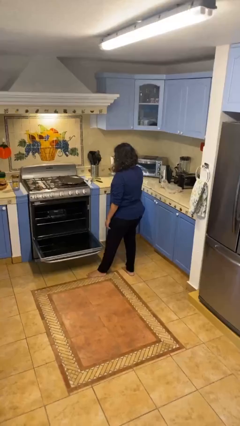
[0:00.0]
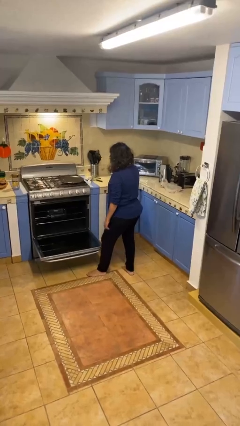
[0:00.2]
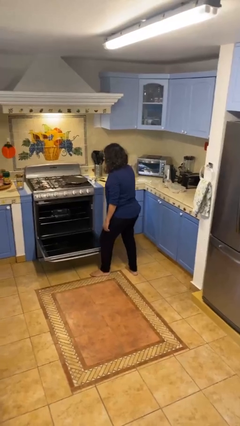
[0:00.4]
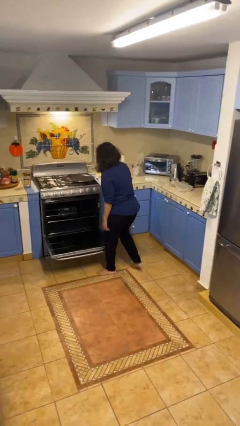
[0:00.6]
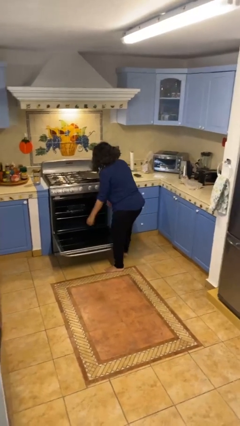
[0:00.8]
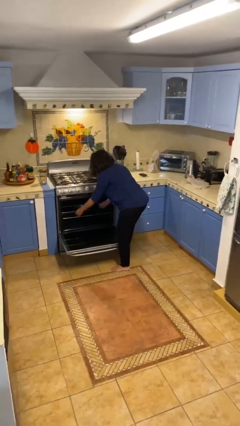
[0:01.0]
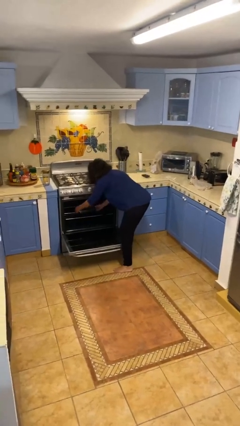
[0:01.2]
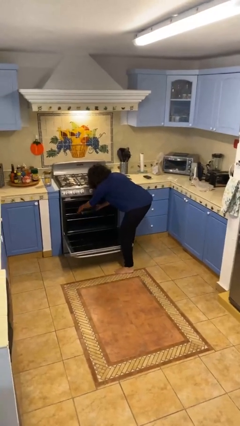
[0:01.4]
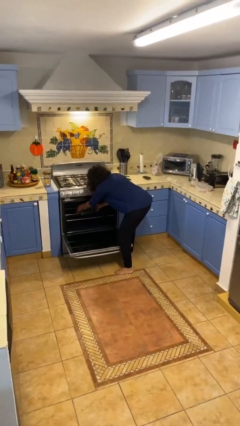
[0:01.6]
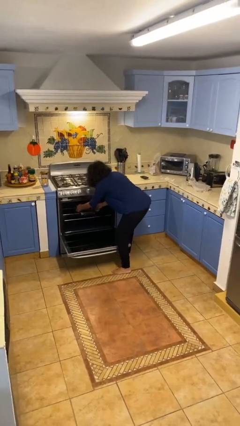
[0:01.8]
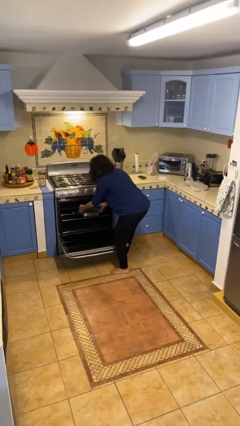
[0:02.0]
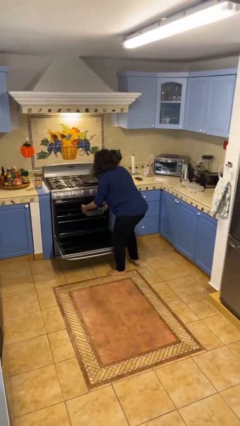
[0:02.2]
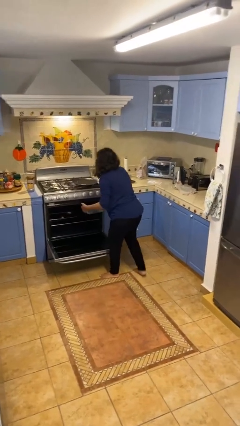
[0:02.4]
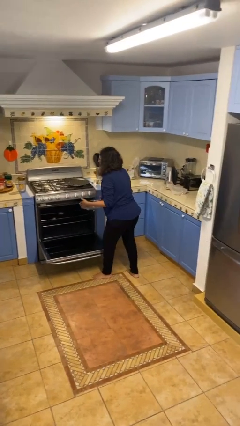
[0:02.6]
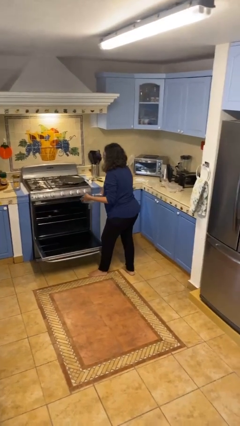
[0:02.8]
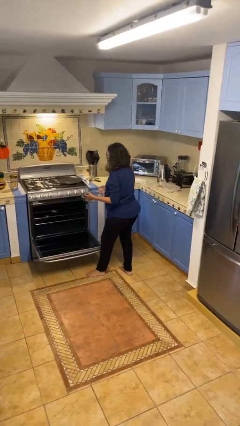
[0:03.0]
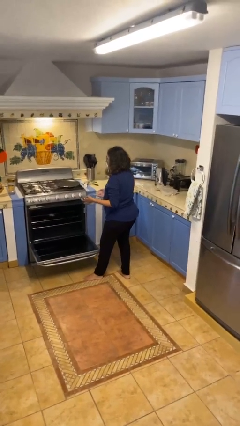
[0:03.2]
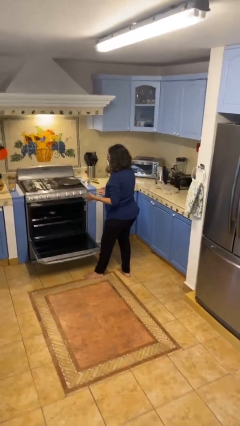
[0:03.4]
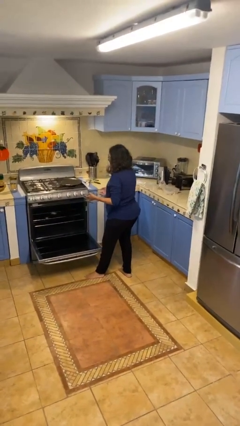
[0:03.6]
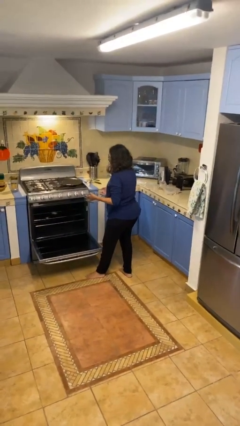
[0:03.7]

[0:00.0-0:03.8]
person takes object from oven

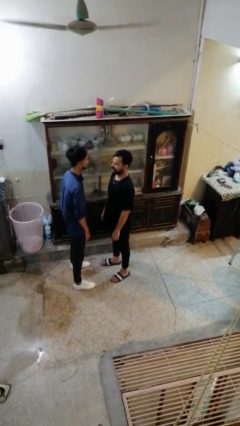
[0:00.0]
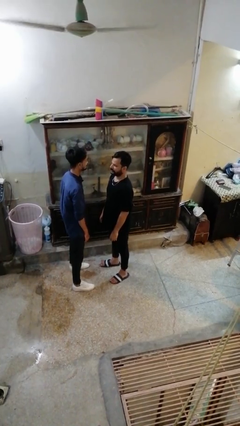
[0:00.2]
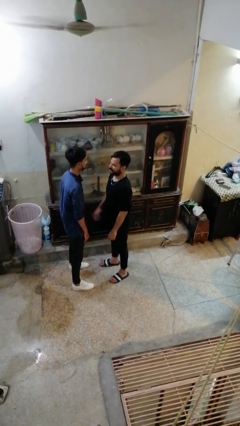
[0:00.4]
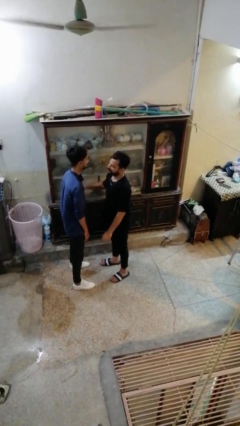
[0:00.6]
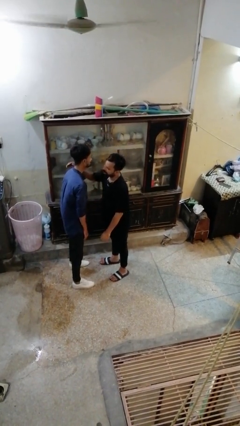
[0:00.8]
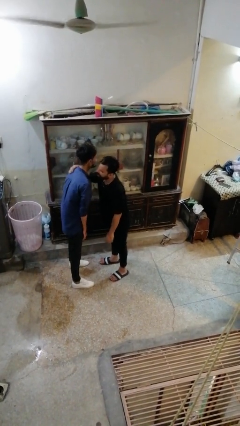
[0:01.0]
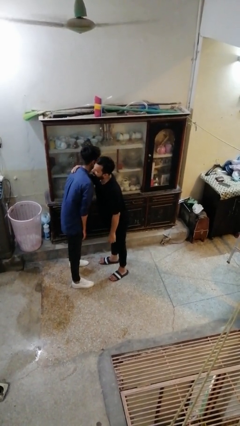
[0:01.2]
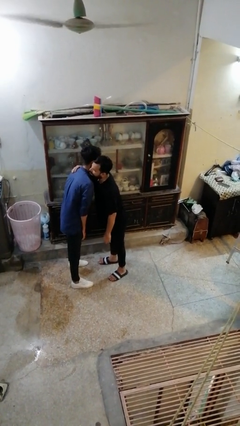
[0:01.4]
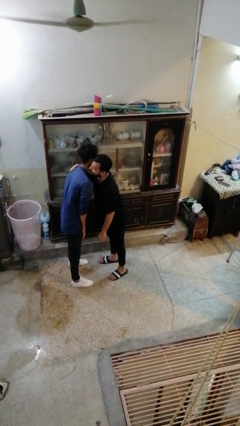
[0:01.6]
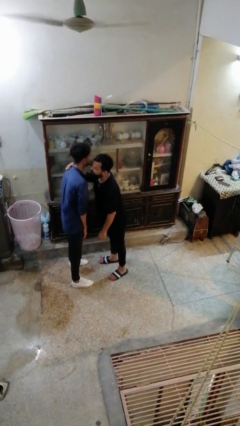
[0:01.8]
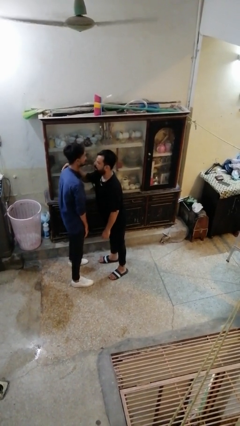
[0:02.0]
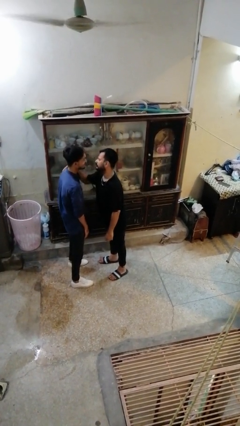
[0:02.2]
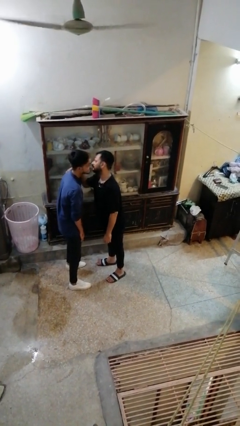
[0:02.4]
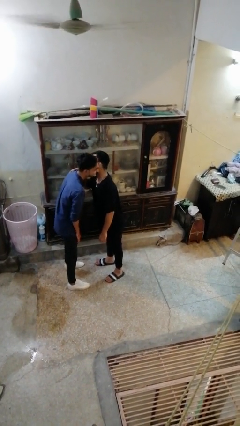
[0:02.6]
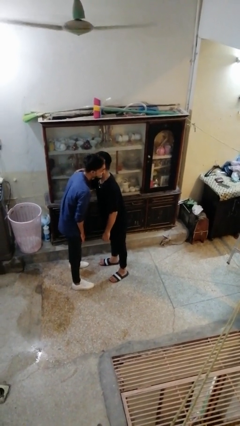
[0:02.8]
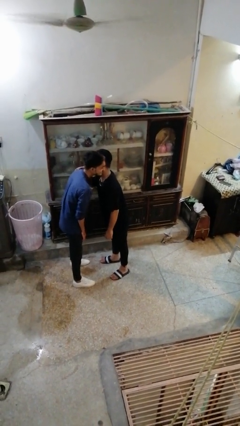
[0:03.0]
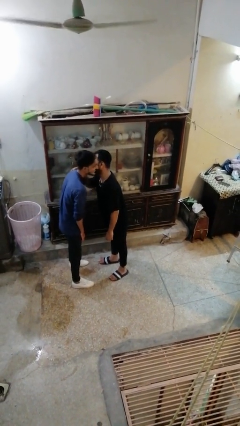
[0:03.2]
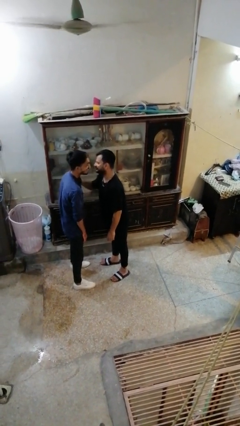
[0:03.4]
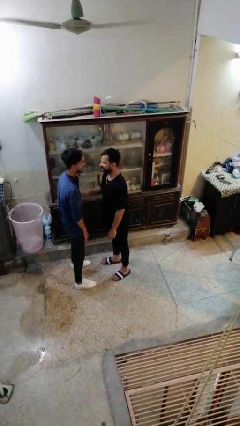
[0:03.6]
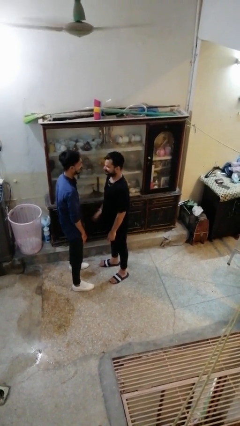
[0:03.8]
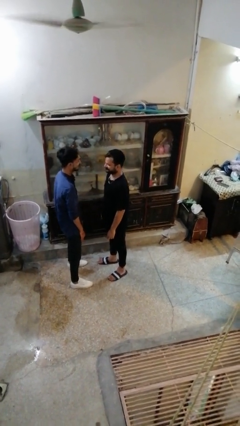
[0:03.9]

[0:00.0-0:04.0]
person kisses cheek of person

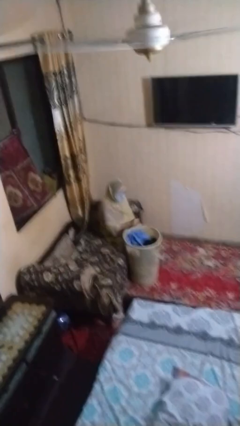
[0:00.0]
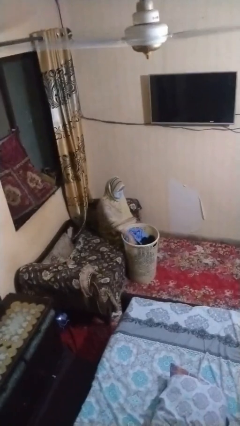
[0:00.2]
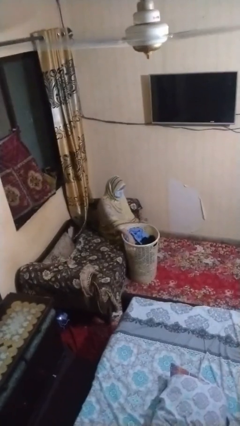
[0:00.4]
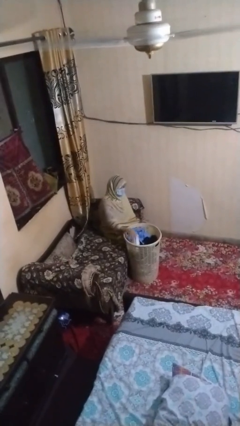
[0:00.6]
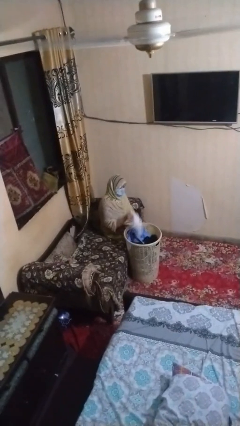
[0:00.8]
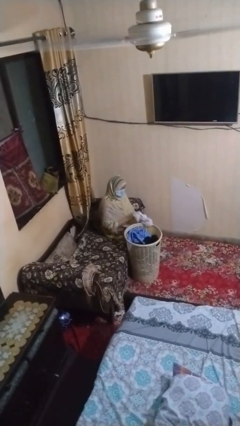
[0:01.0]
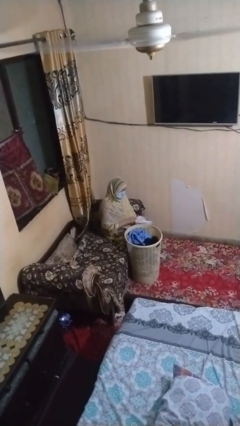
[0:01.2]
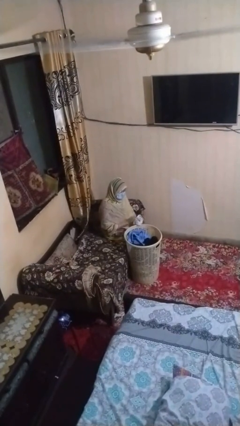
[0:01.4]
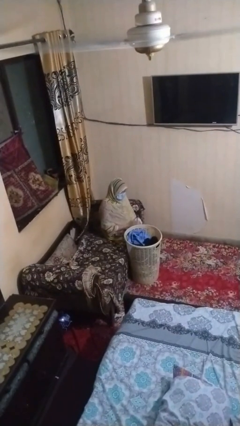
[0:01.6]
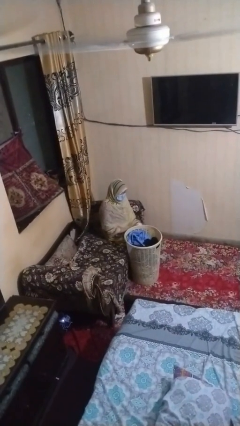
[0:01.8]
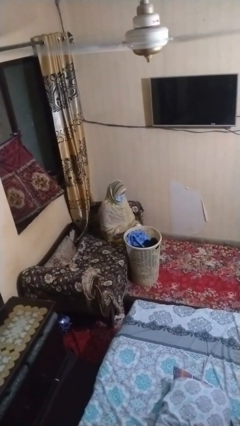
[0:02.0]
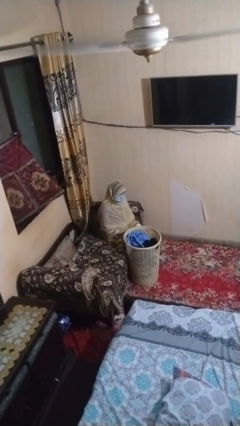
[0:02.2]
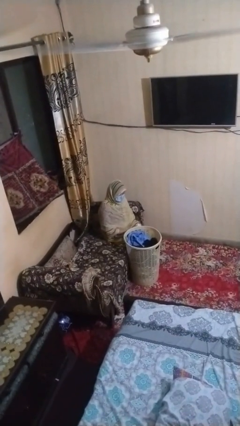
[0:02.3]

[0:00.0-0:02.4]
person takes object from basket

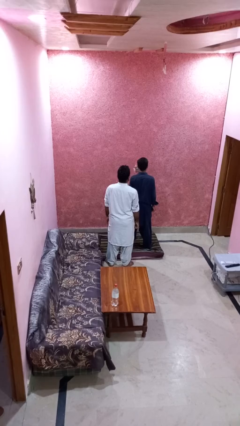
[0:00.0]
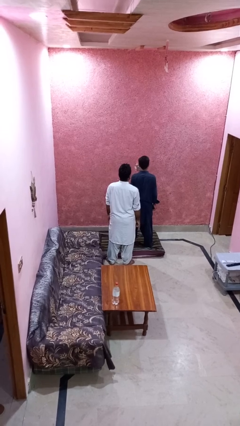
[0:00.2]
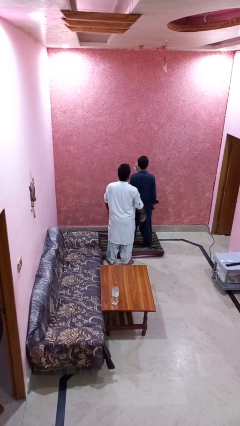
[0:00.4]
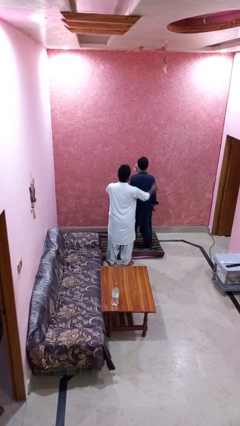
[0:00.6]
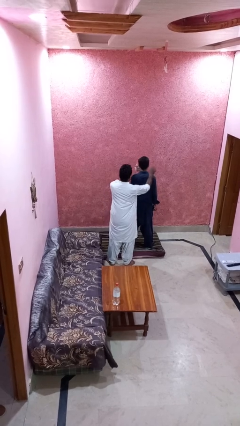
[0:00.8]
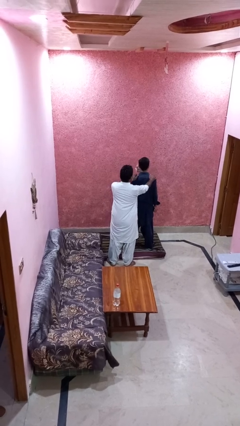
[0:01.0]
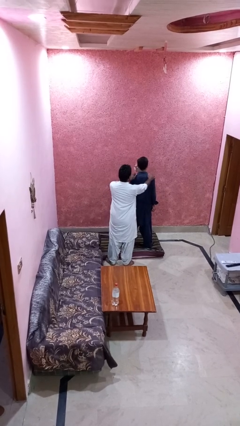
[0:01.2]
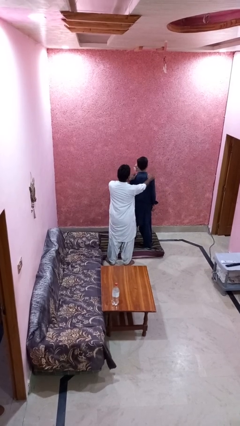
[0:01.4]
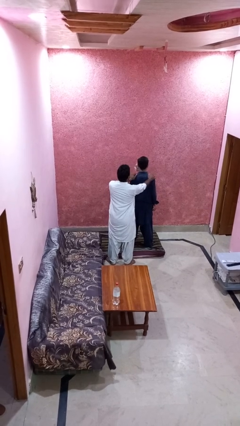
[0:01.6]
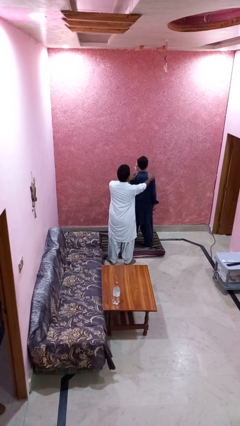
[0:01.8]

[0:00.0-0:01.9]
person grabs person by shoulder

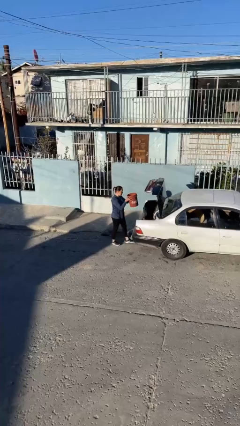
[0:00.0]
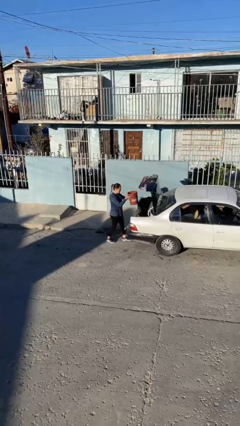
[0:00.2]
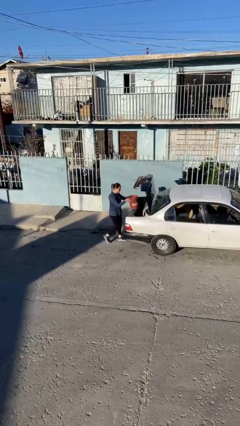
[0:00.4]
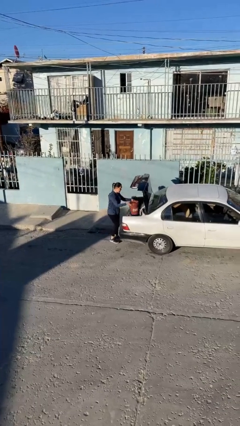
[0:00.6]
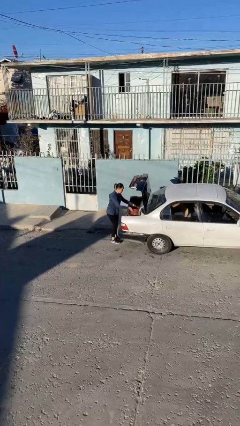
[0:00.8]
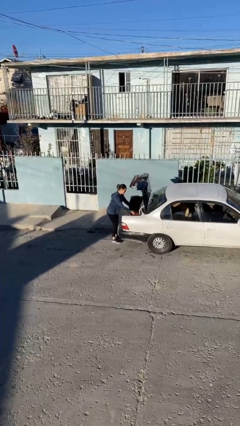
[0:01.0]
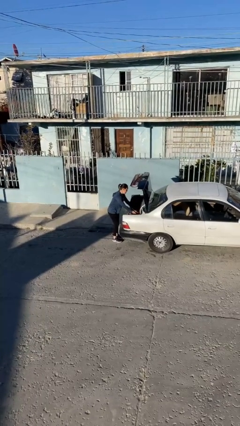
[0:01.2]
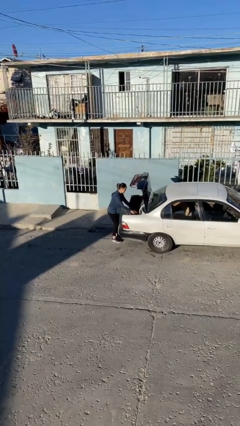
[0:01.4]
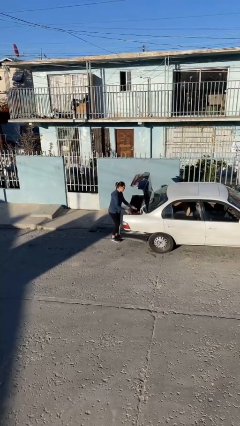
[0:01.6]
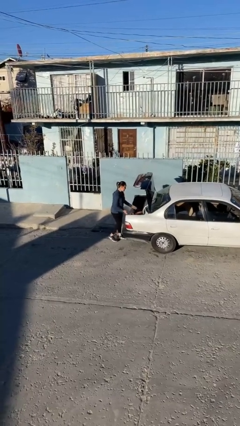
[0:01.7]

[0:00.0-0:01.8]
person loads car

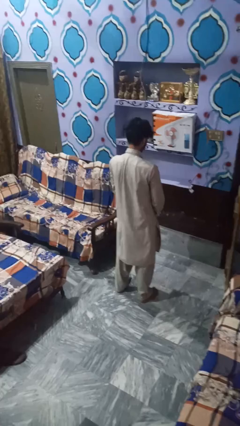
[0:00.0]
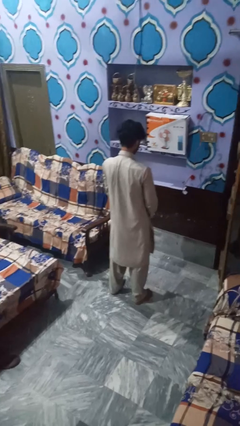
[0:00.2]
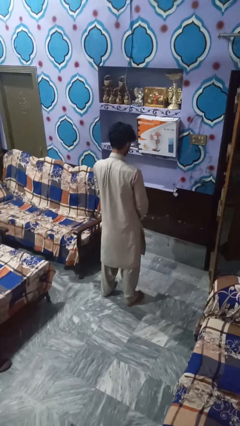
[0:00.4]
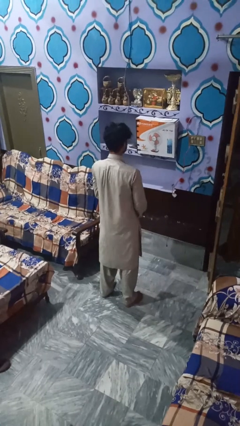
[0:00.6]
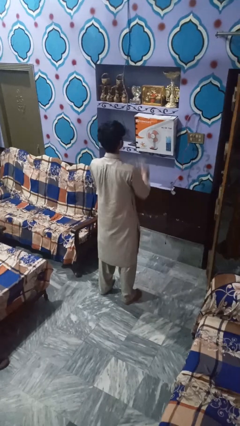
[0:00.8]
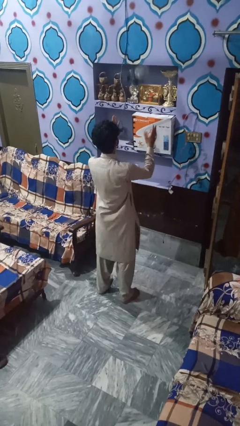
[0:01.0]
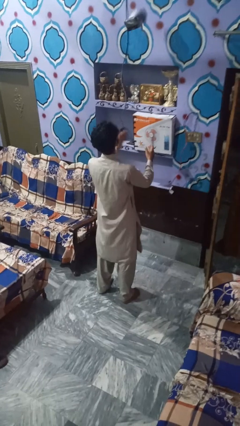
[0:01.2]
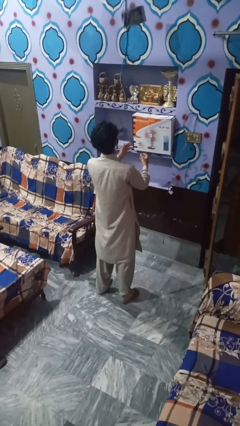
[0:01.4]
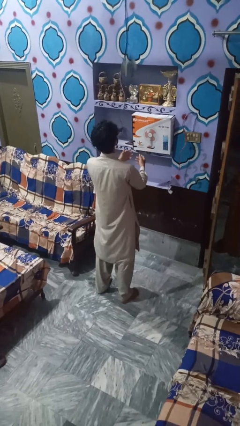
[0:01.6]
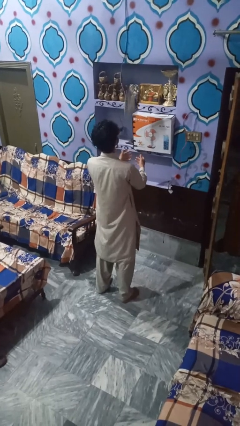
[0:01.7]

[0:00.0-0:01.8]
person drops object

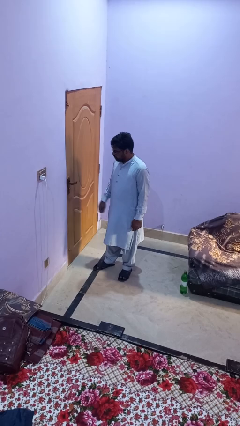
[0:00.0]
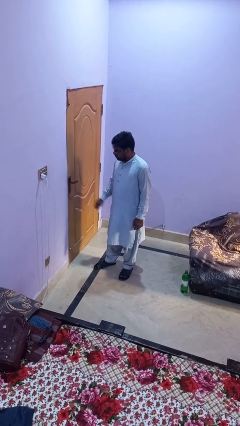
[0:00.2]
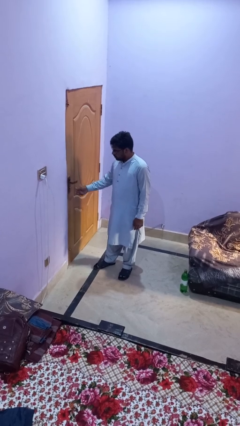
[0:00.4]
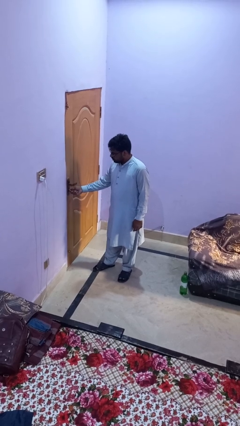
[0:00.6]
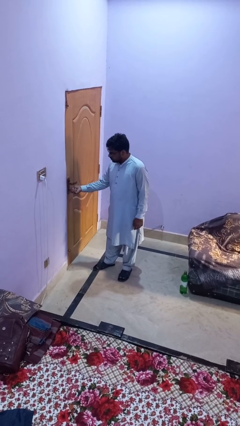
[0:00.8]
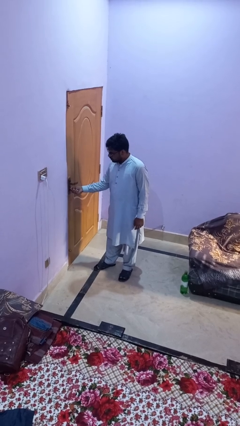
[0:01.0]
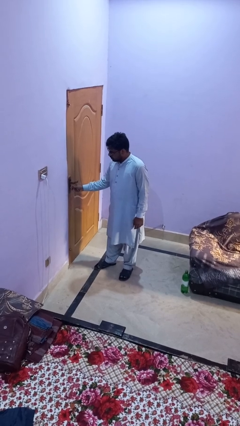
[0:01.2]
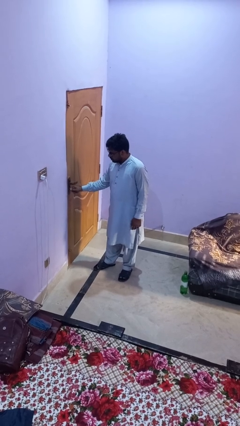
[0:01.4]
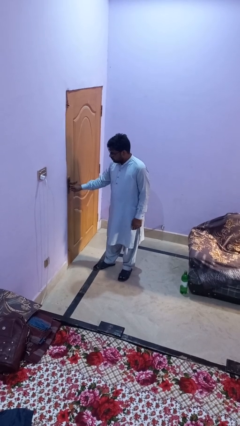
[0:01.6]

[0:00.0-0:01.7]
person locks door with keys
